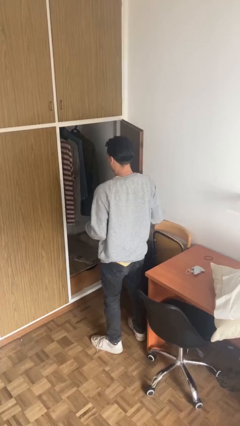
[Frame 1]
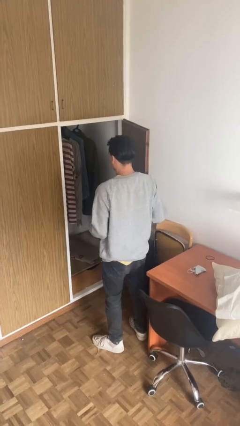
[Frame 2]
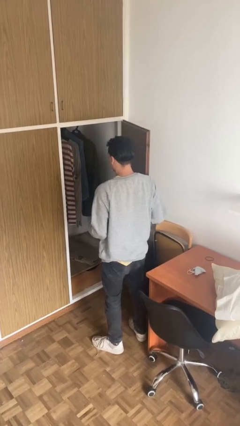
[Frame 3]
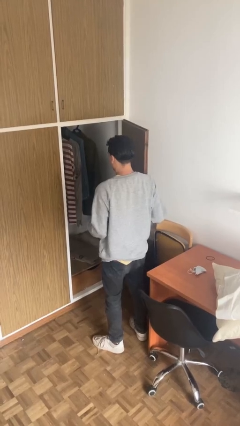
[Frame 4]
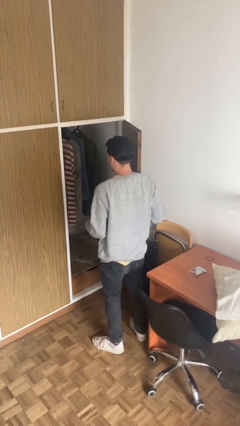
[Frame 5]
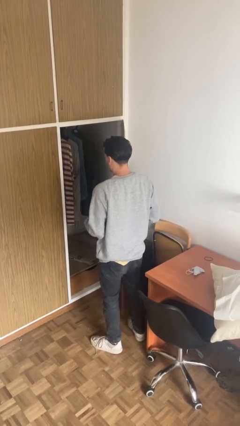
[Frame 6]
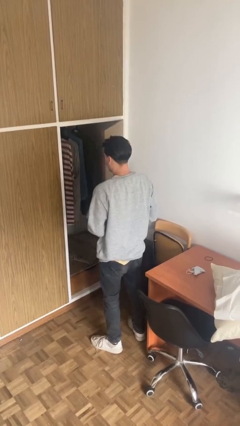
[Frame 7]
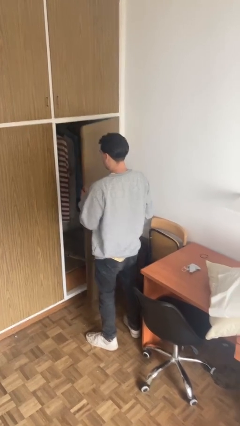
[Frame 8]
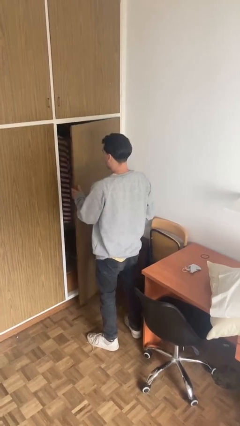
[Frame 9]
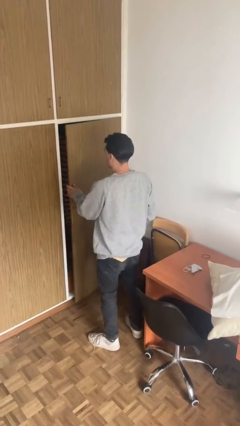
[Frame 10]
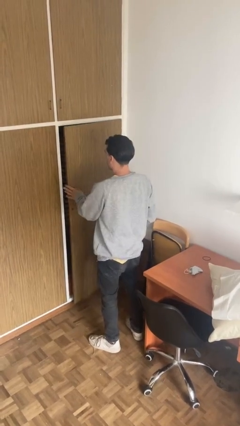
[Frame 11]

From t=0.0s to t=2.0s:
person closes closet door

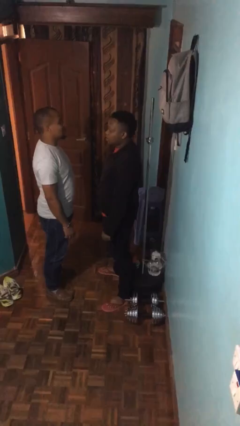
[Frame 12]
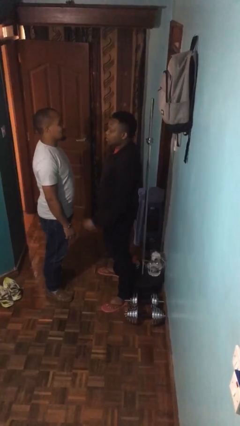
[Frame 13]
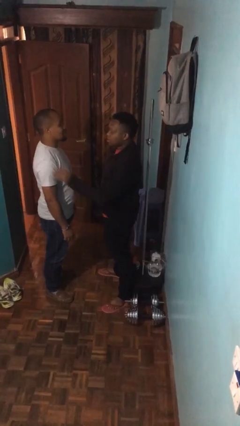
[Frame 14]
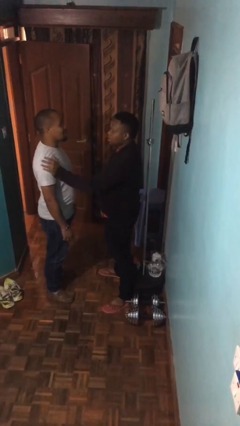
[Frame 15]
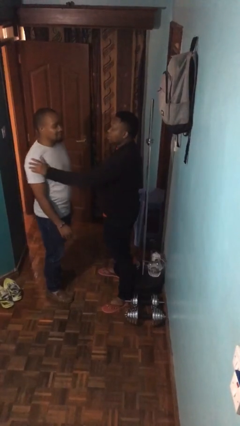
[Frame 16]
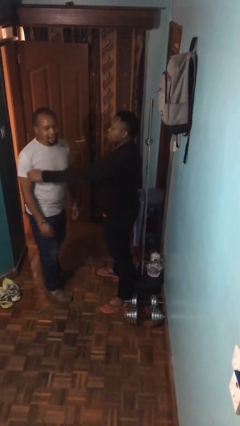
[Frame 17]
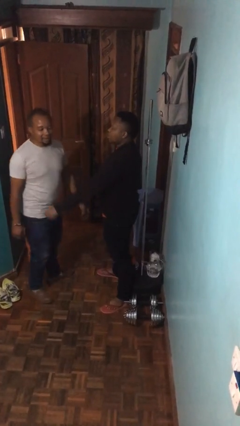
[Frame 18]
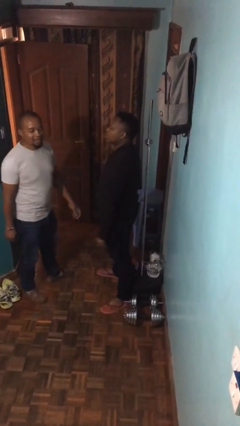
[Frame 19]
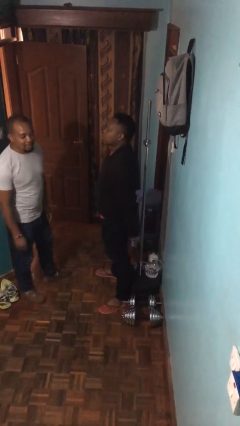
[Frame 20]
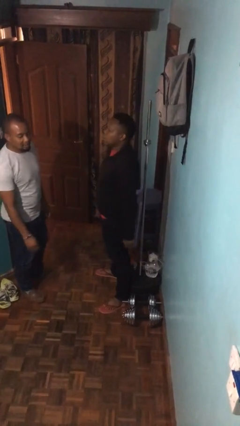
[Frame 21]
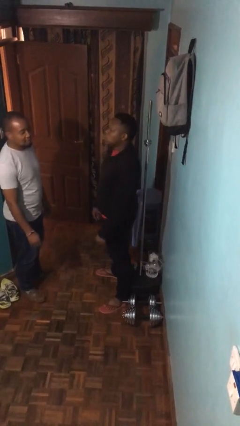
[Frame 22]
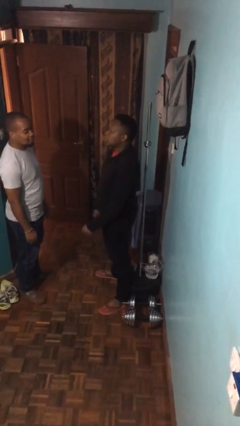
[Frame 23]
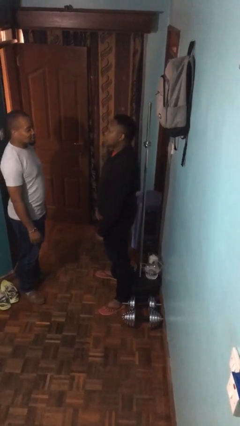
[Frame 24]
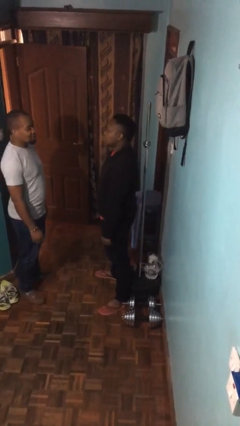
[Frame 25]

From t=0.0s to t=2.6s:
person shoves person

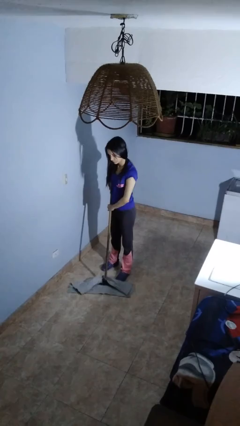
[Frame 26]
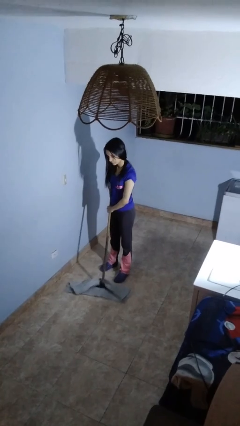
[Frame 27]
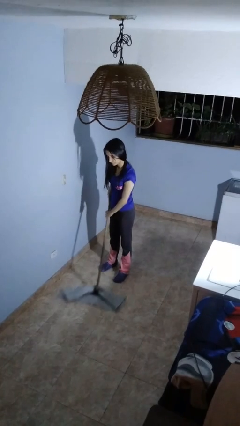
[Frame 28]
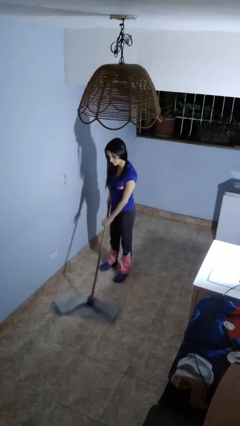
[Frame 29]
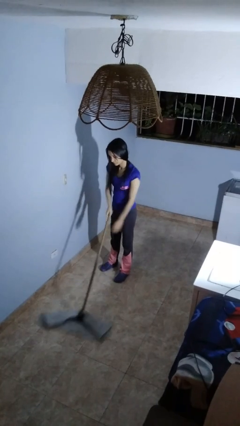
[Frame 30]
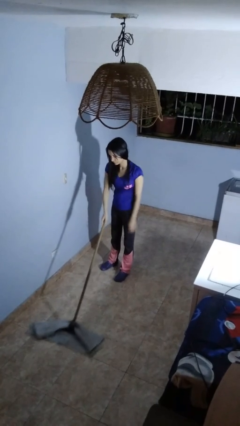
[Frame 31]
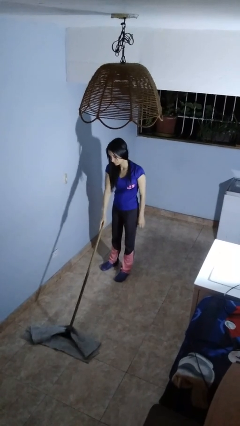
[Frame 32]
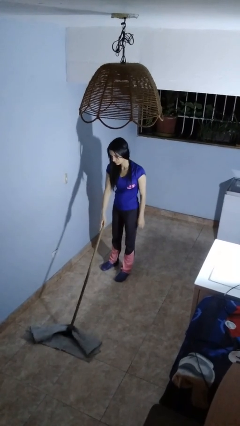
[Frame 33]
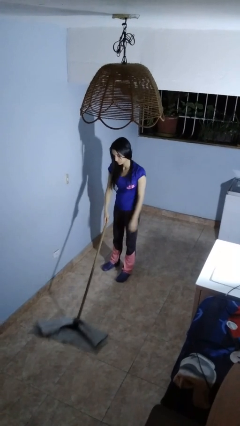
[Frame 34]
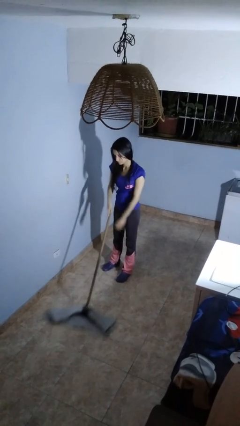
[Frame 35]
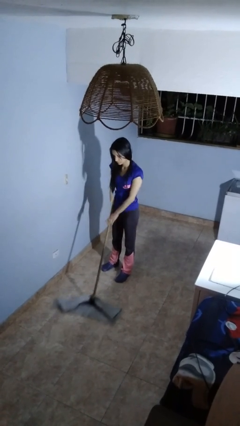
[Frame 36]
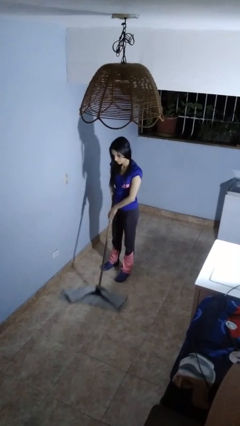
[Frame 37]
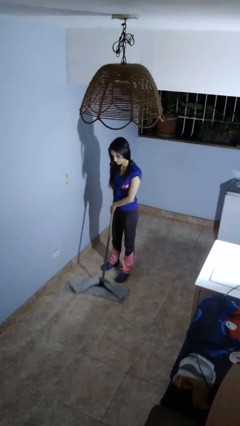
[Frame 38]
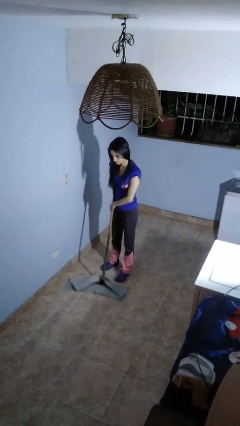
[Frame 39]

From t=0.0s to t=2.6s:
person mops

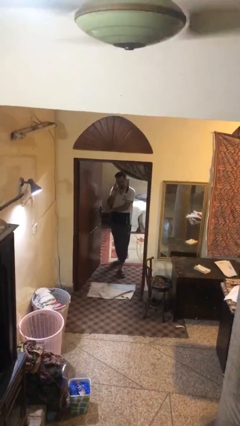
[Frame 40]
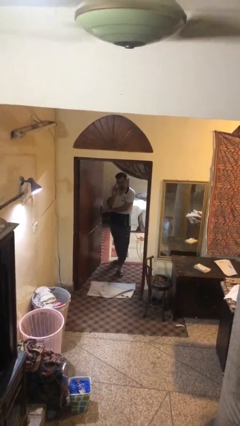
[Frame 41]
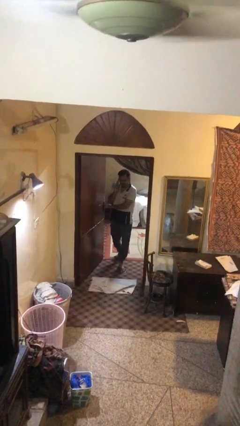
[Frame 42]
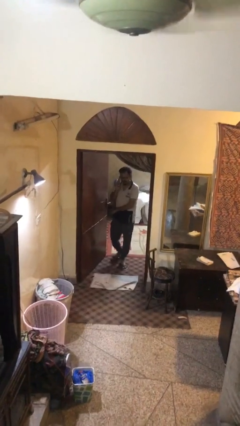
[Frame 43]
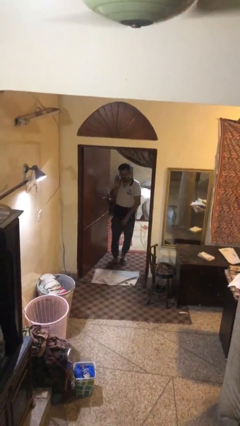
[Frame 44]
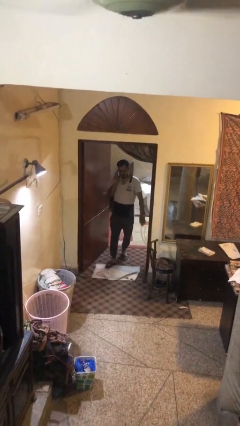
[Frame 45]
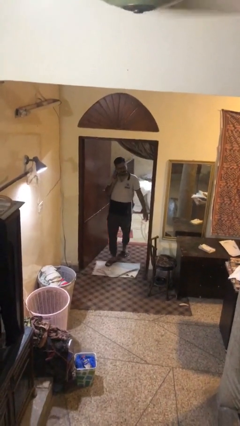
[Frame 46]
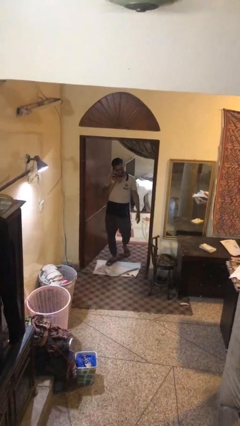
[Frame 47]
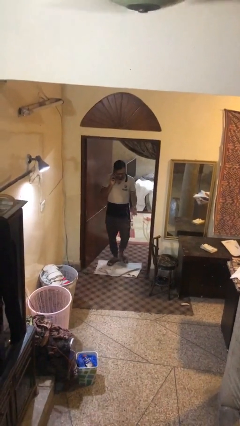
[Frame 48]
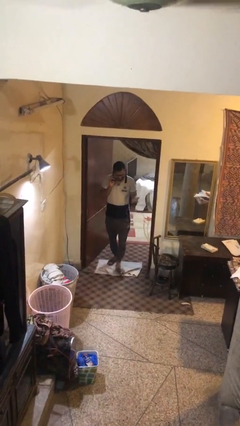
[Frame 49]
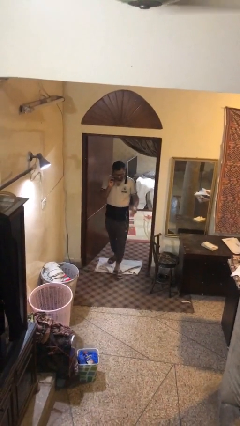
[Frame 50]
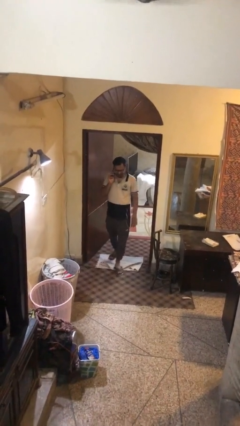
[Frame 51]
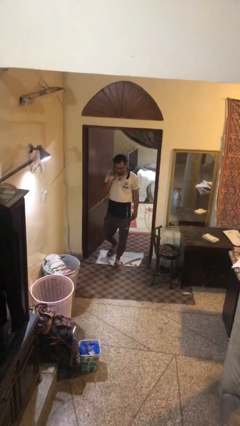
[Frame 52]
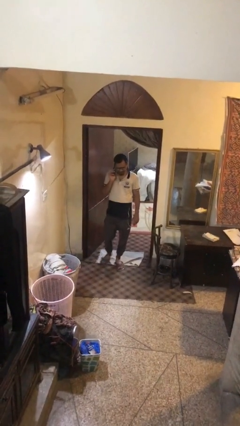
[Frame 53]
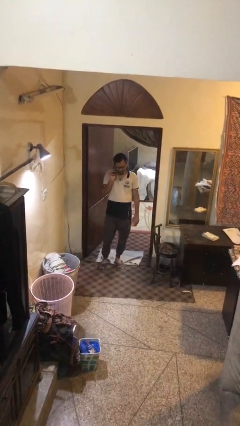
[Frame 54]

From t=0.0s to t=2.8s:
person enters scene through structure

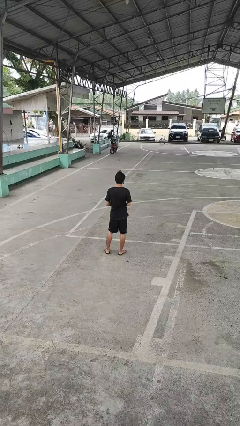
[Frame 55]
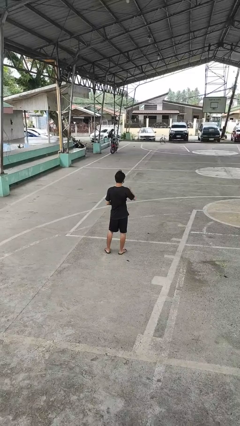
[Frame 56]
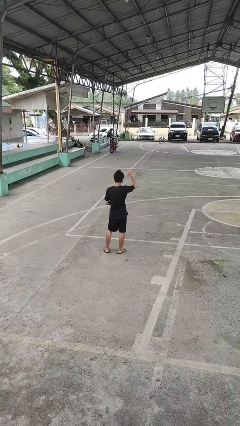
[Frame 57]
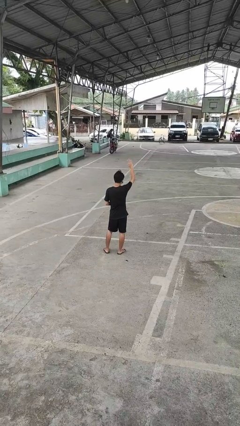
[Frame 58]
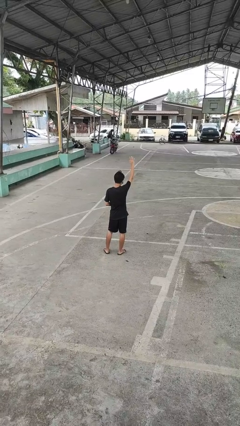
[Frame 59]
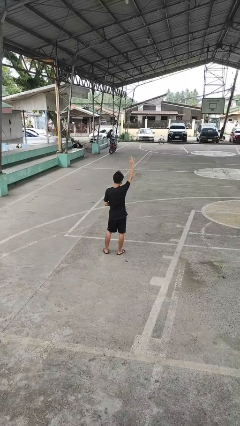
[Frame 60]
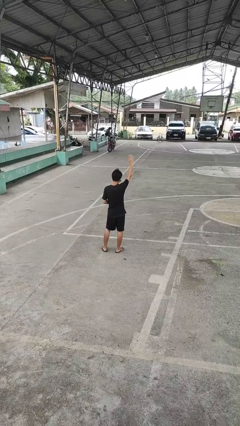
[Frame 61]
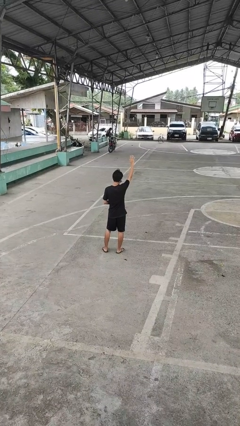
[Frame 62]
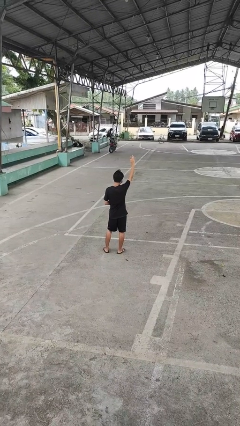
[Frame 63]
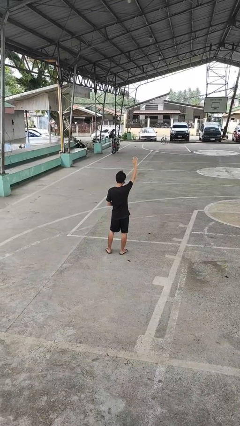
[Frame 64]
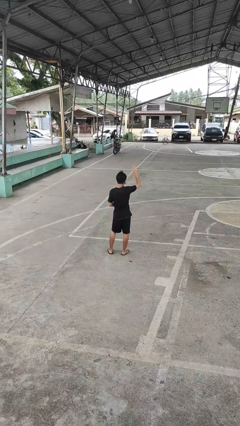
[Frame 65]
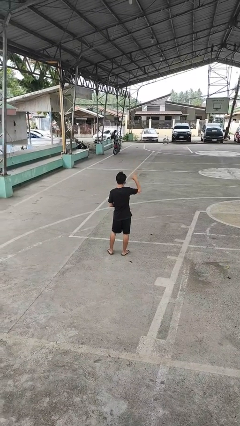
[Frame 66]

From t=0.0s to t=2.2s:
person gestures raise hand

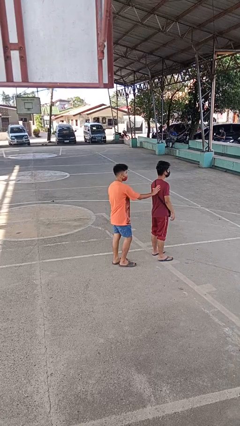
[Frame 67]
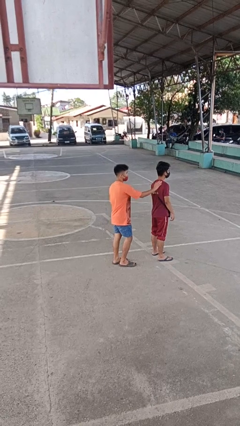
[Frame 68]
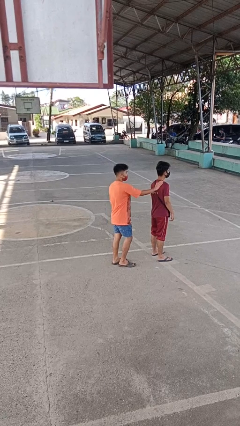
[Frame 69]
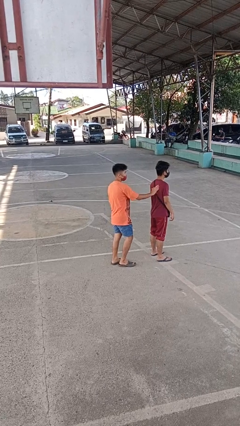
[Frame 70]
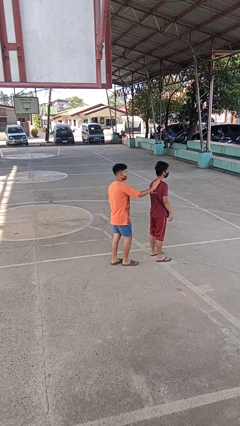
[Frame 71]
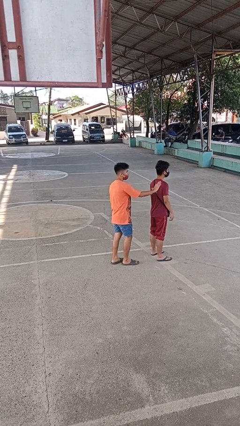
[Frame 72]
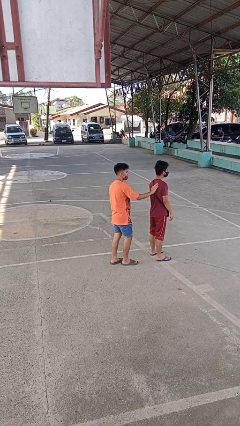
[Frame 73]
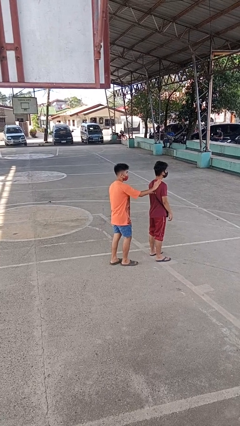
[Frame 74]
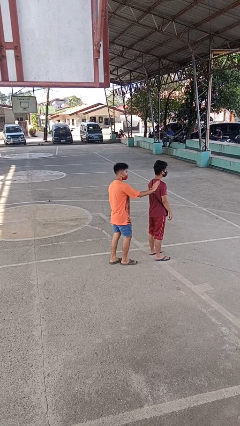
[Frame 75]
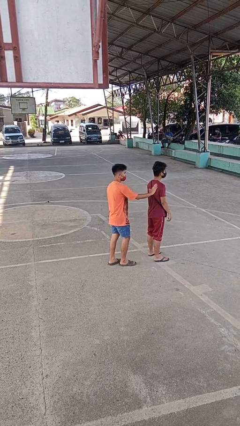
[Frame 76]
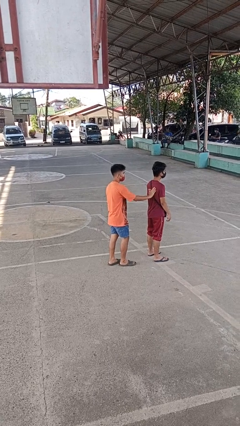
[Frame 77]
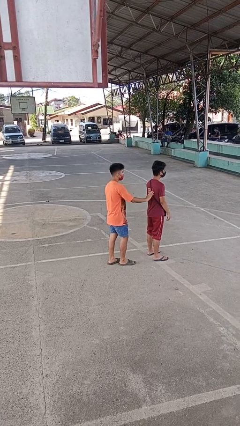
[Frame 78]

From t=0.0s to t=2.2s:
person touches back of person

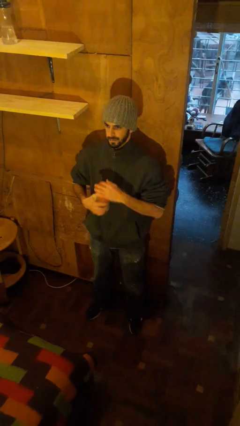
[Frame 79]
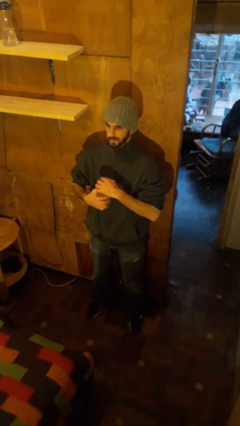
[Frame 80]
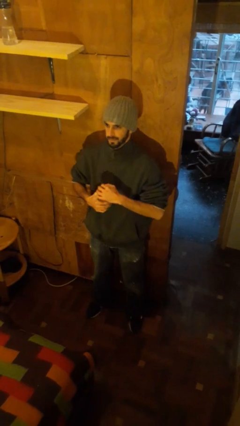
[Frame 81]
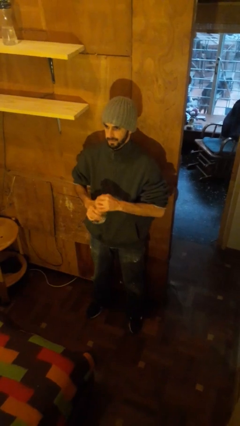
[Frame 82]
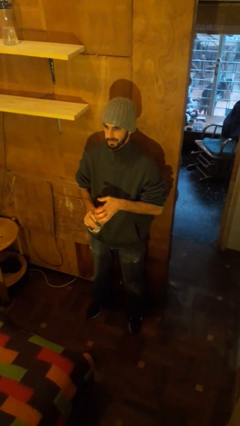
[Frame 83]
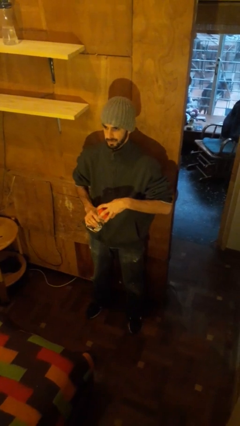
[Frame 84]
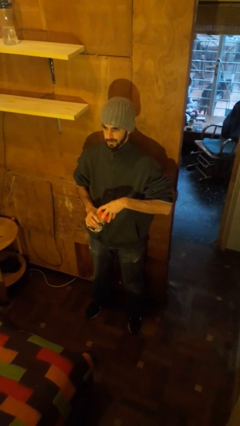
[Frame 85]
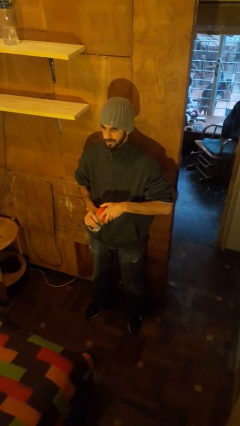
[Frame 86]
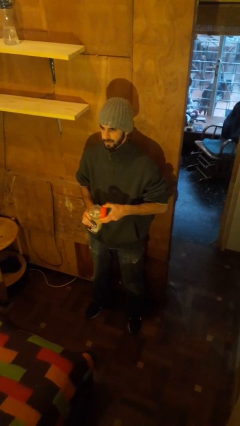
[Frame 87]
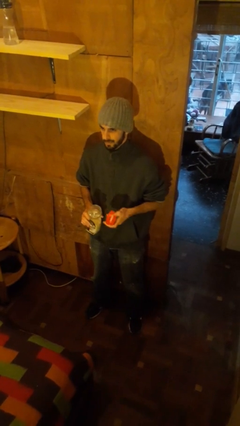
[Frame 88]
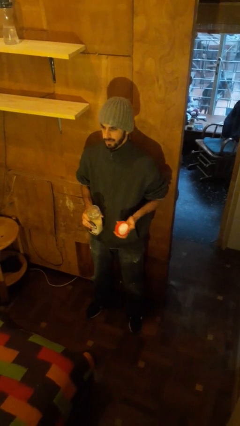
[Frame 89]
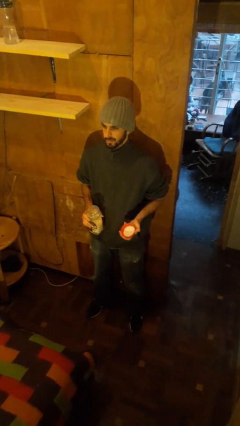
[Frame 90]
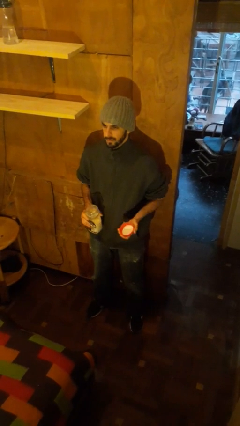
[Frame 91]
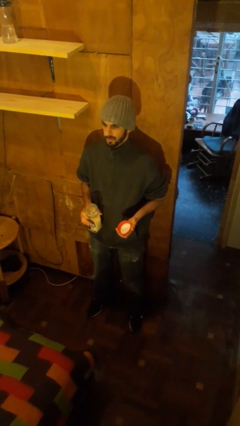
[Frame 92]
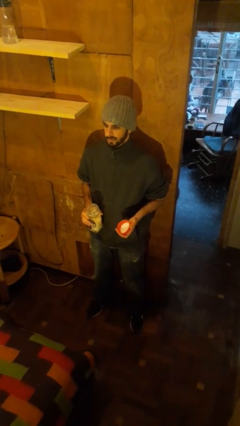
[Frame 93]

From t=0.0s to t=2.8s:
person opens jar
